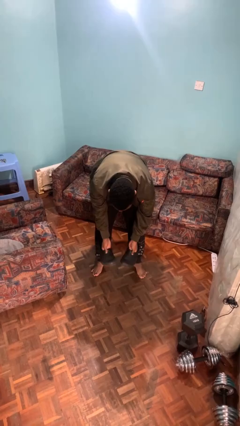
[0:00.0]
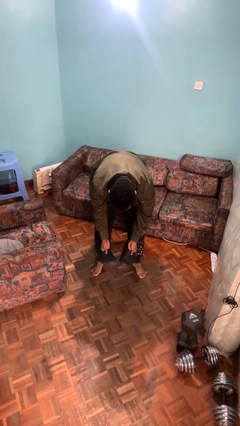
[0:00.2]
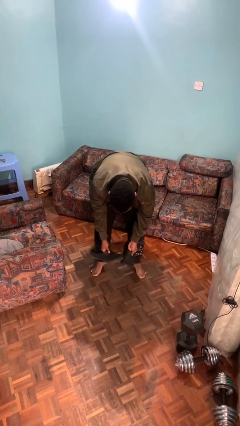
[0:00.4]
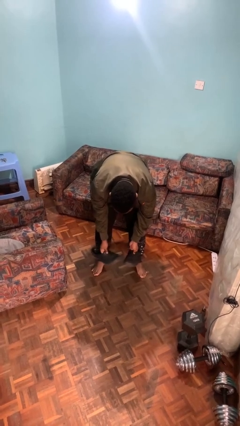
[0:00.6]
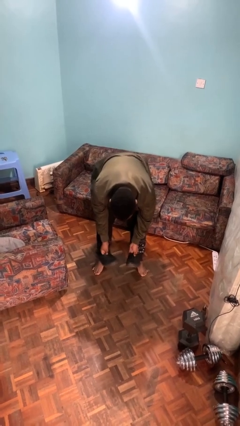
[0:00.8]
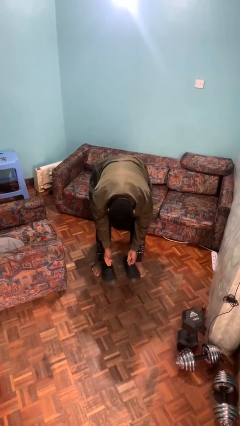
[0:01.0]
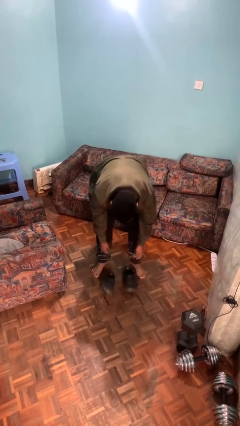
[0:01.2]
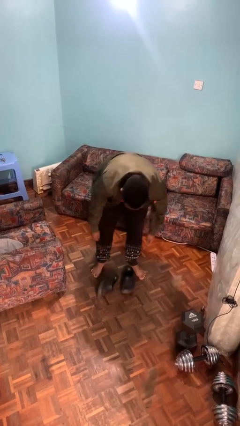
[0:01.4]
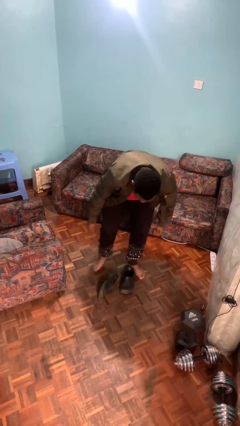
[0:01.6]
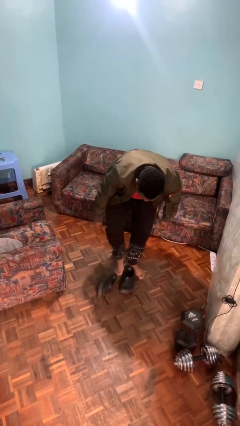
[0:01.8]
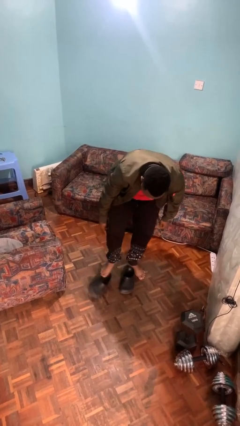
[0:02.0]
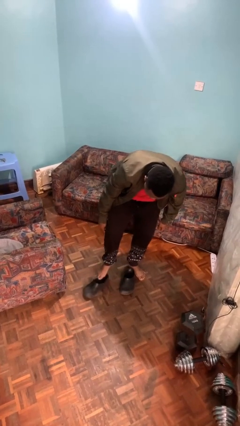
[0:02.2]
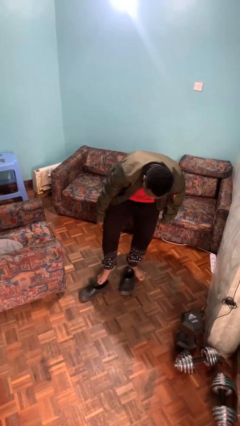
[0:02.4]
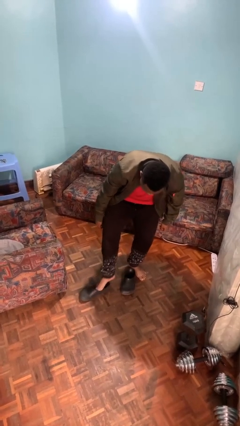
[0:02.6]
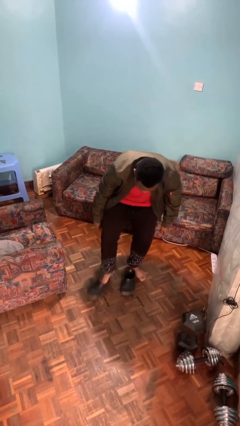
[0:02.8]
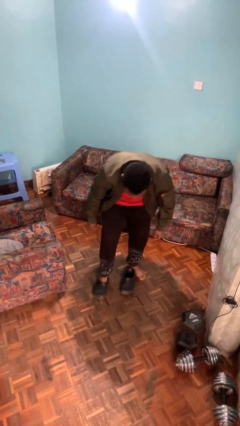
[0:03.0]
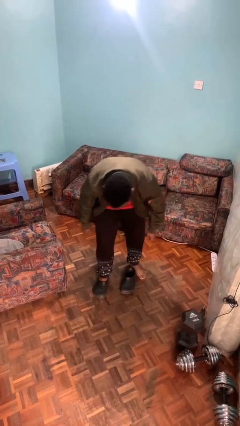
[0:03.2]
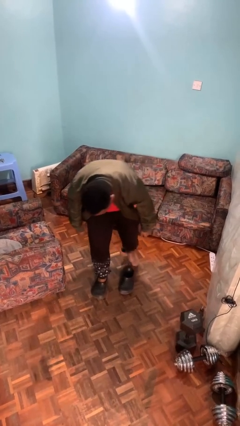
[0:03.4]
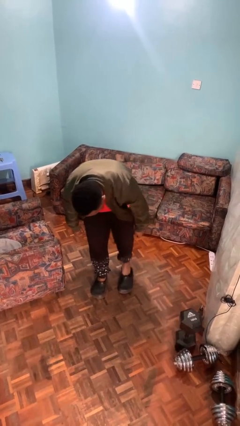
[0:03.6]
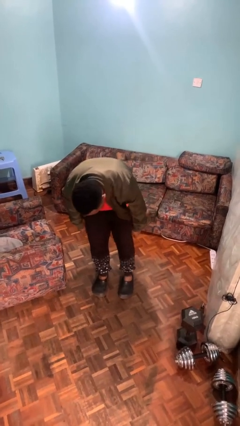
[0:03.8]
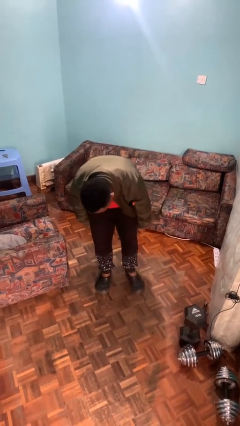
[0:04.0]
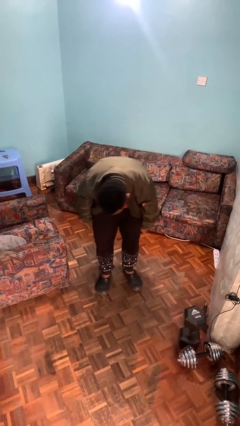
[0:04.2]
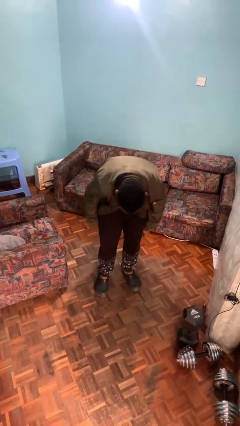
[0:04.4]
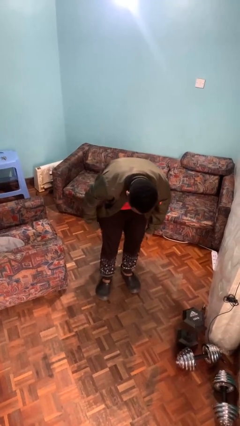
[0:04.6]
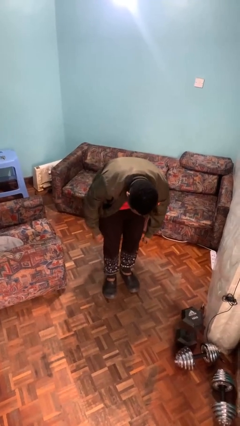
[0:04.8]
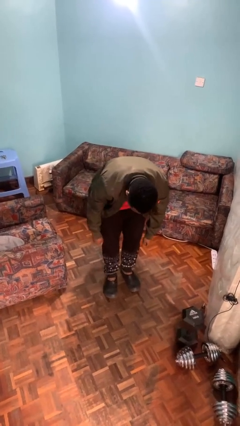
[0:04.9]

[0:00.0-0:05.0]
person puts on shoes

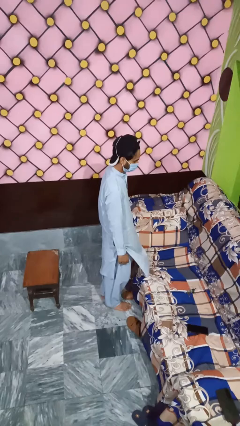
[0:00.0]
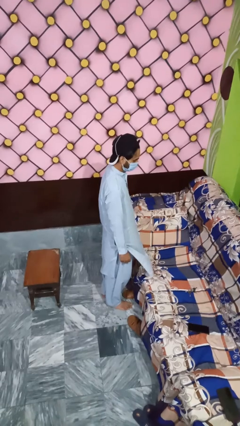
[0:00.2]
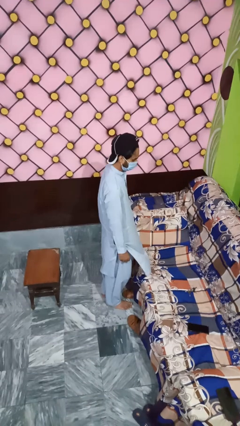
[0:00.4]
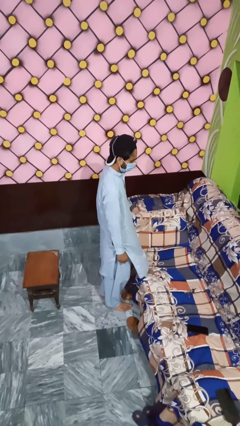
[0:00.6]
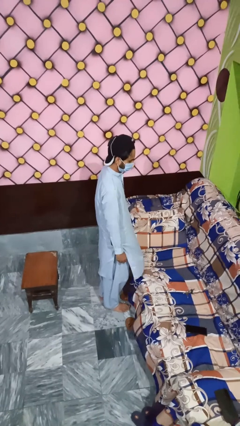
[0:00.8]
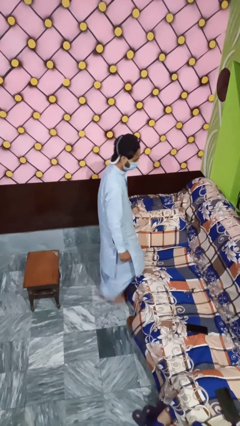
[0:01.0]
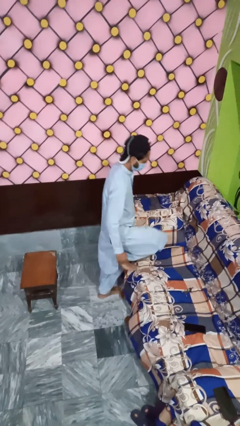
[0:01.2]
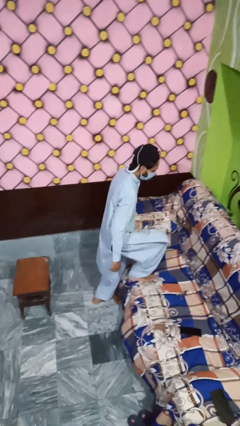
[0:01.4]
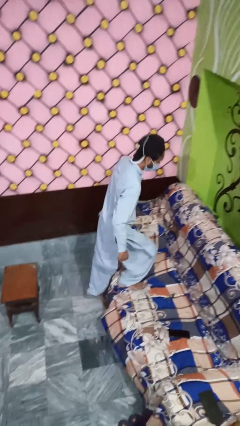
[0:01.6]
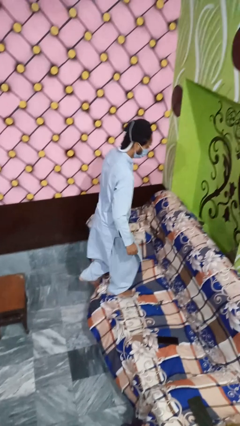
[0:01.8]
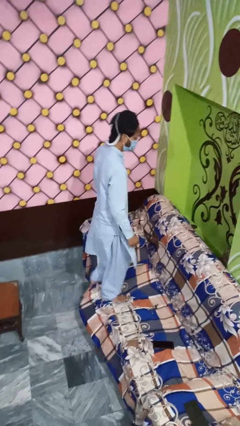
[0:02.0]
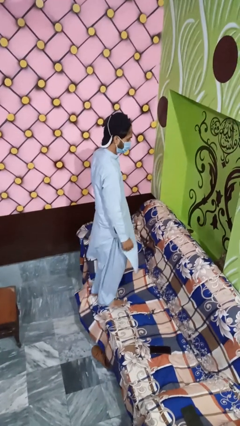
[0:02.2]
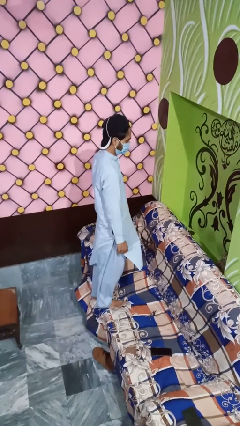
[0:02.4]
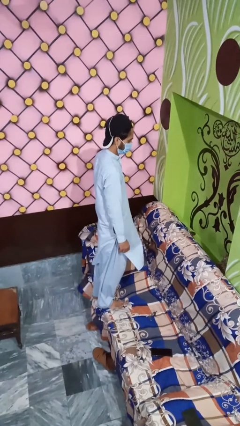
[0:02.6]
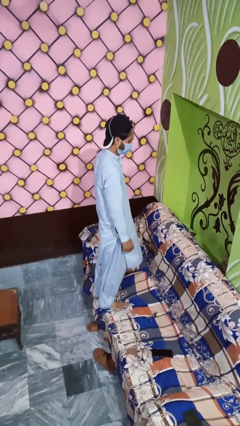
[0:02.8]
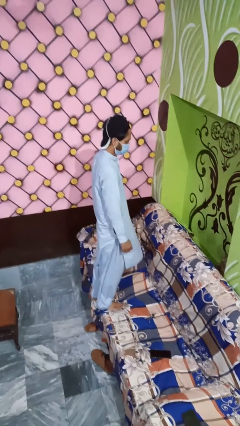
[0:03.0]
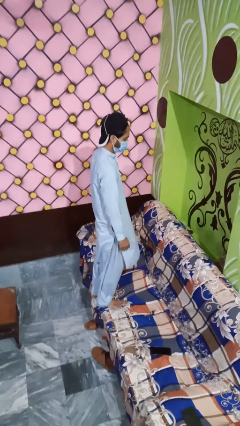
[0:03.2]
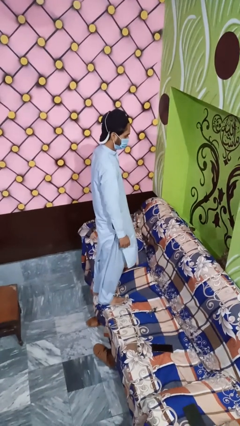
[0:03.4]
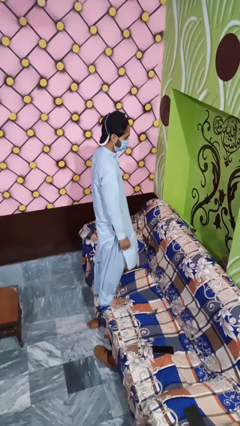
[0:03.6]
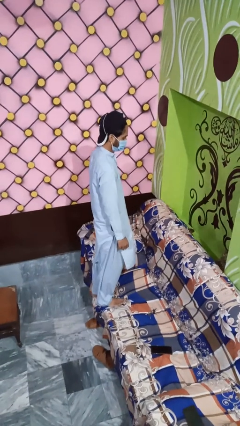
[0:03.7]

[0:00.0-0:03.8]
person climbs on couch

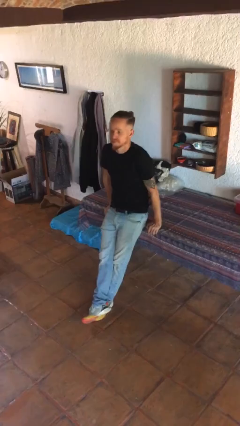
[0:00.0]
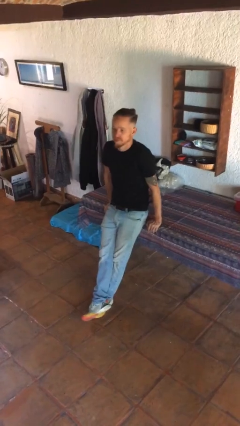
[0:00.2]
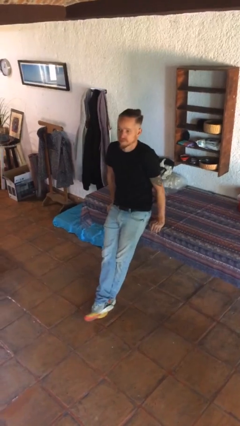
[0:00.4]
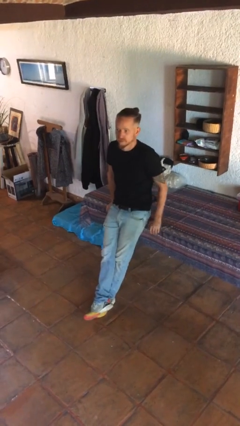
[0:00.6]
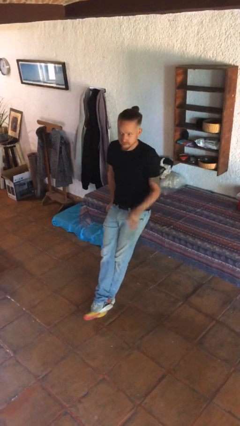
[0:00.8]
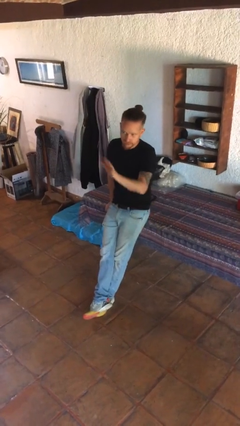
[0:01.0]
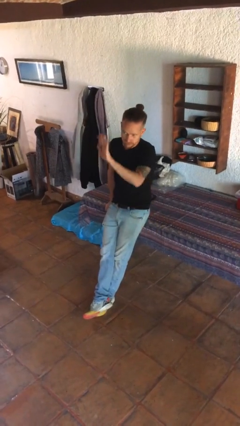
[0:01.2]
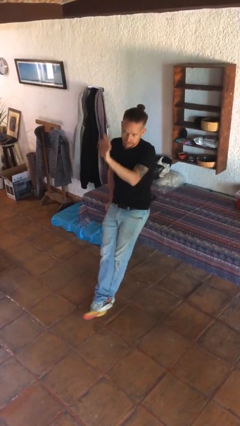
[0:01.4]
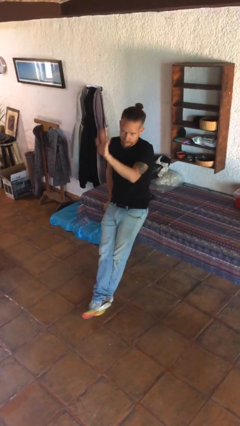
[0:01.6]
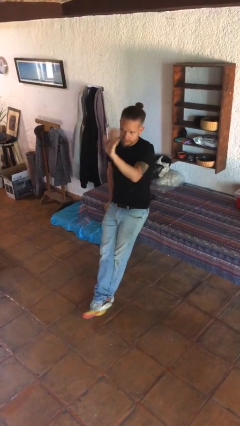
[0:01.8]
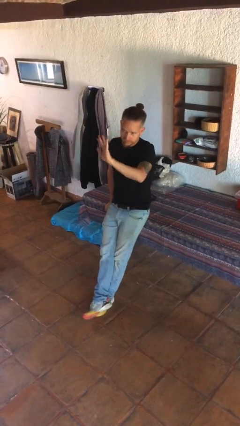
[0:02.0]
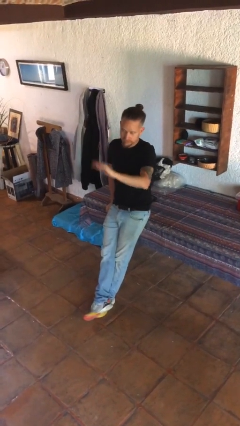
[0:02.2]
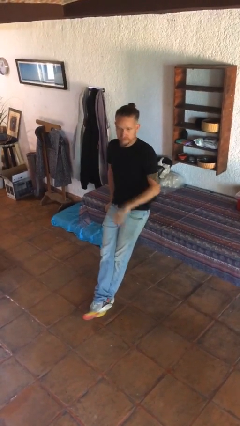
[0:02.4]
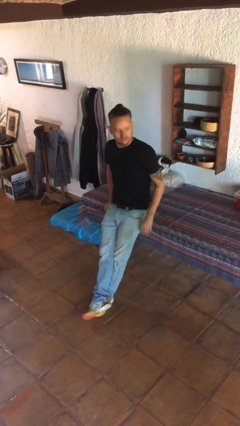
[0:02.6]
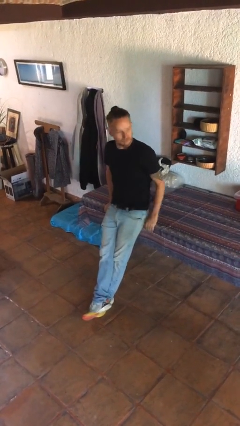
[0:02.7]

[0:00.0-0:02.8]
person waves at person

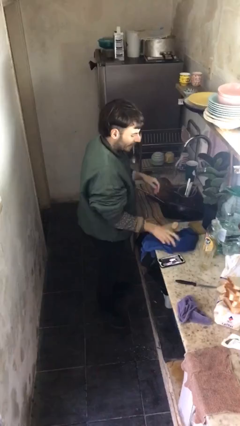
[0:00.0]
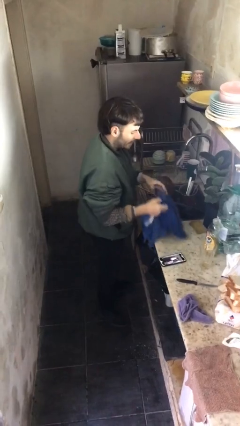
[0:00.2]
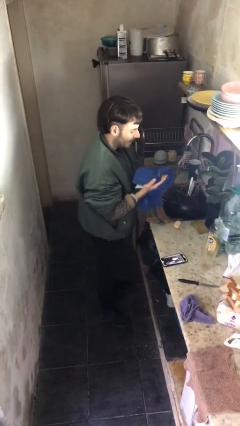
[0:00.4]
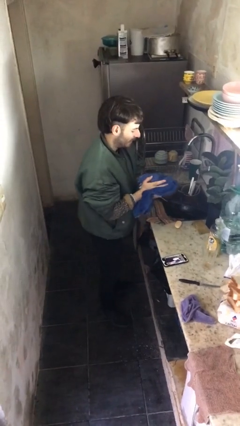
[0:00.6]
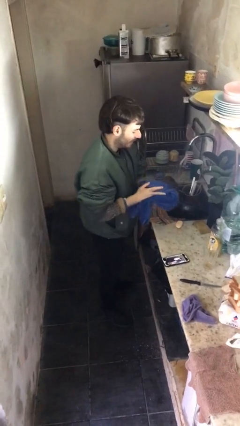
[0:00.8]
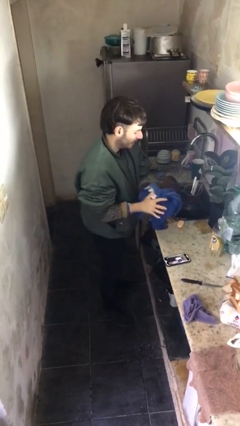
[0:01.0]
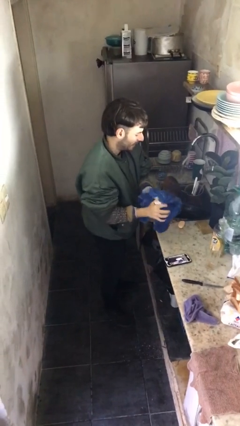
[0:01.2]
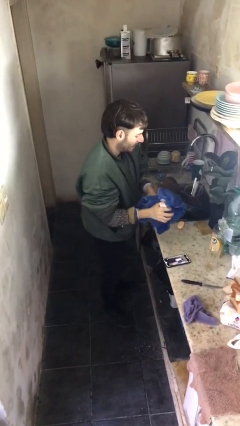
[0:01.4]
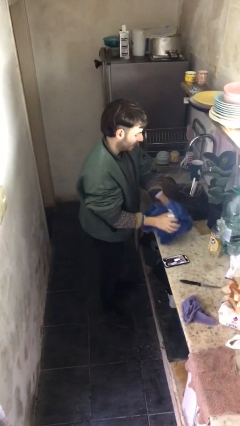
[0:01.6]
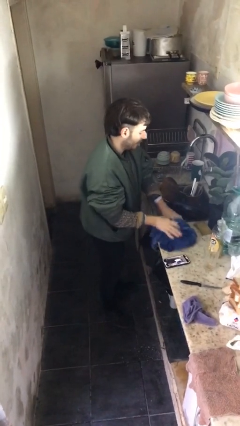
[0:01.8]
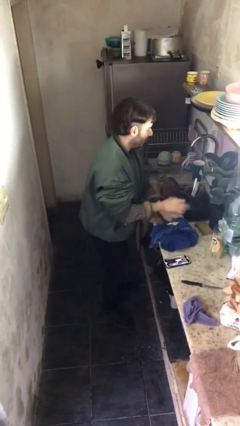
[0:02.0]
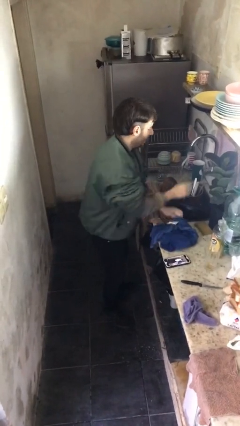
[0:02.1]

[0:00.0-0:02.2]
person dries hands with towel

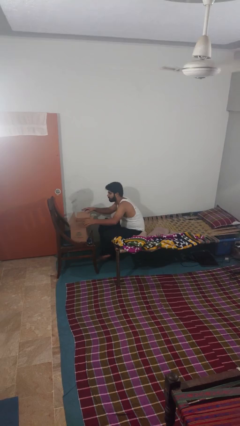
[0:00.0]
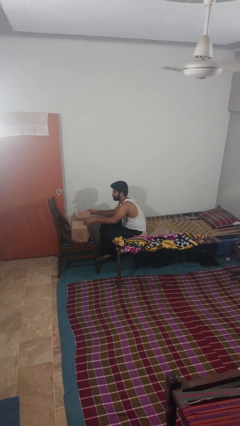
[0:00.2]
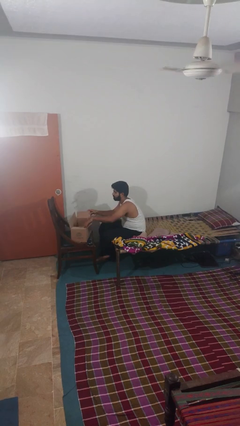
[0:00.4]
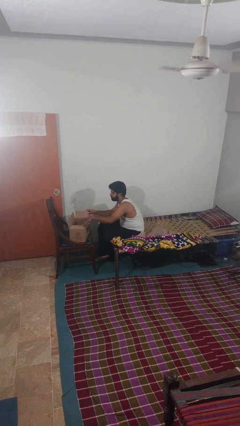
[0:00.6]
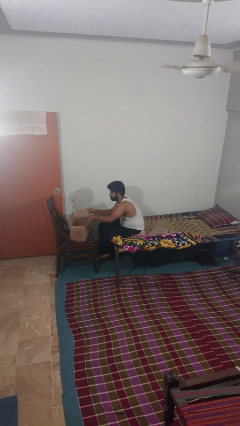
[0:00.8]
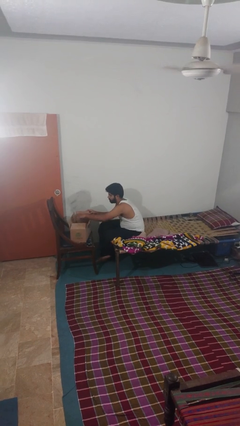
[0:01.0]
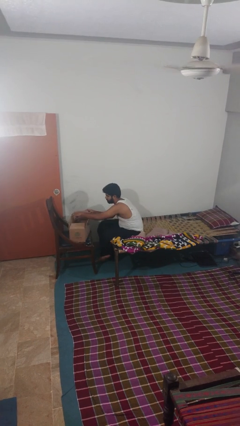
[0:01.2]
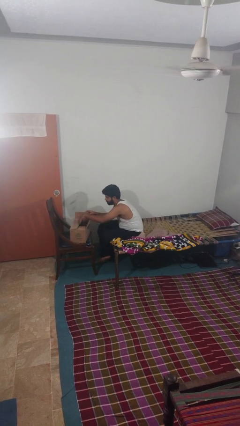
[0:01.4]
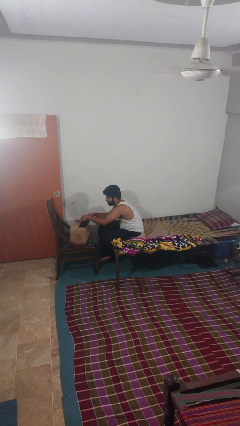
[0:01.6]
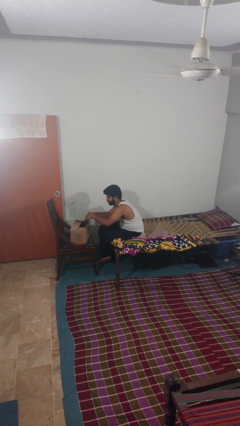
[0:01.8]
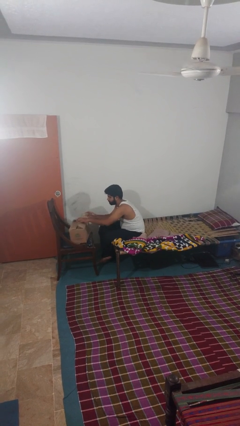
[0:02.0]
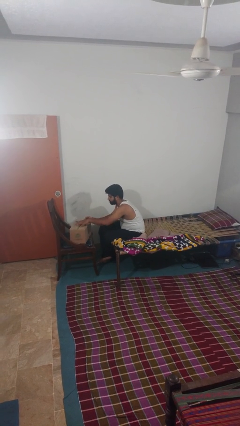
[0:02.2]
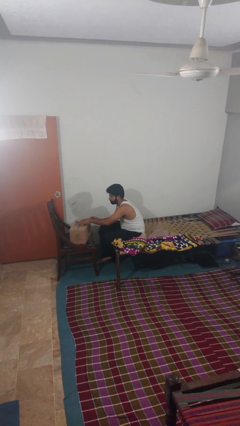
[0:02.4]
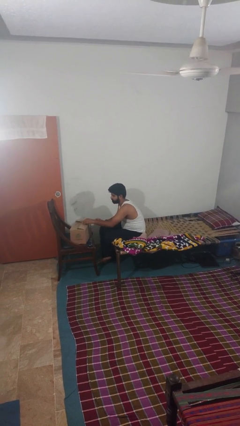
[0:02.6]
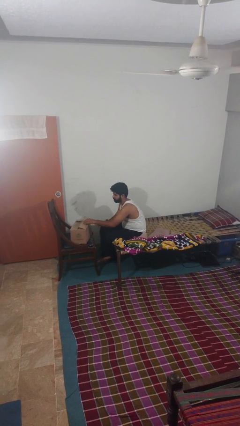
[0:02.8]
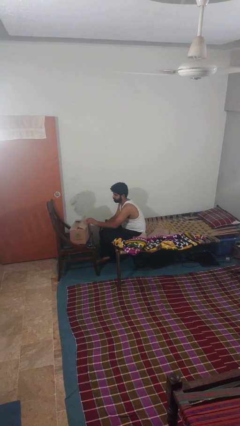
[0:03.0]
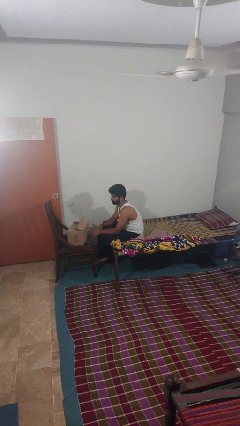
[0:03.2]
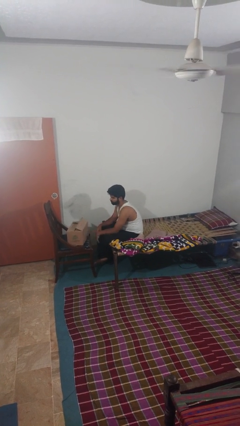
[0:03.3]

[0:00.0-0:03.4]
person closes box
